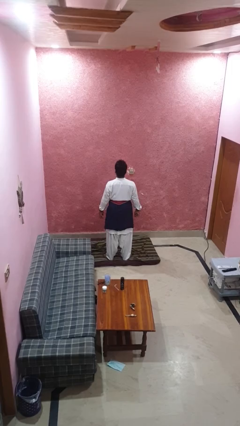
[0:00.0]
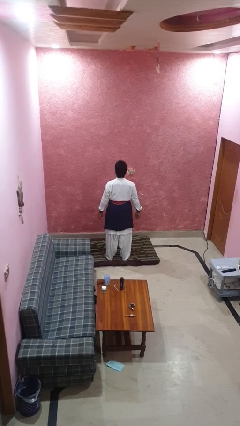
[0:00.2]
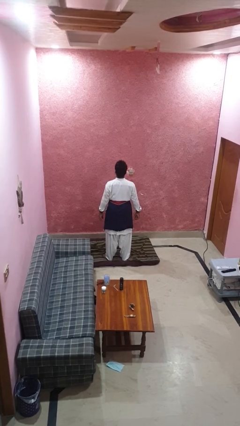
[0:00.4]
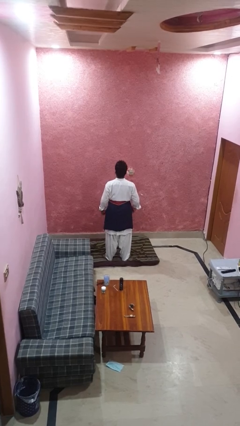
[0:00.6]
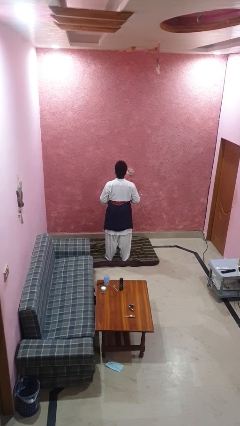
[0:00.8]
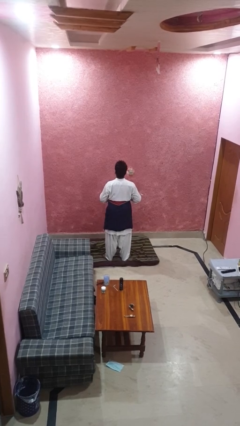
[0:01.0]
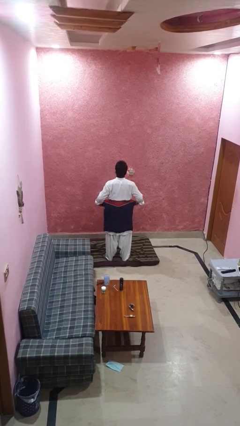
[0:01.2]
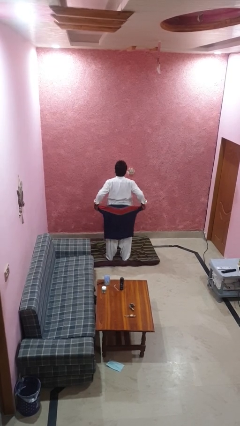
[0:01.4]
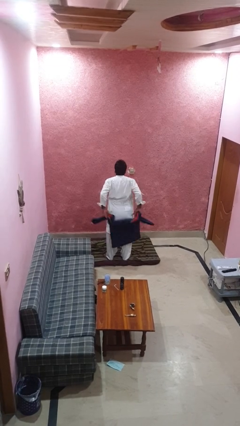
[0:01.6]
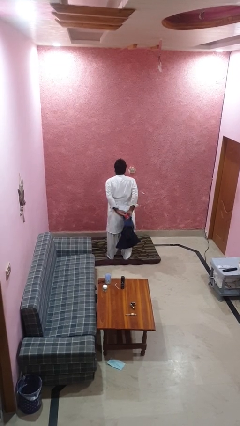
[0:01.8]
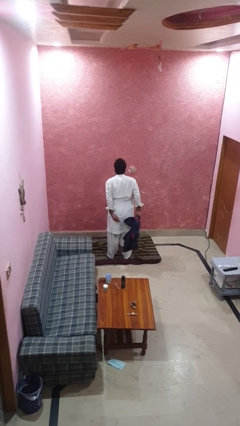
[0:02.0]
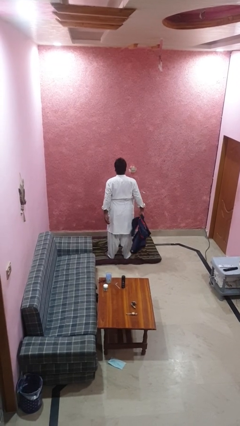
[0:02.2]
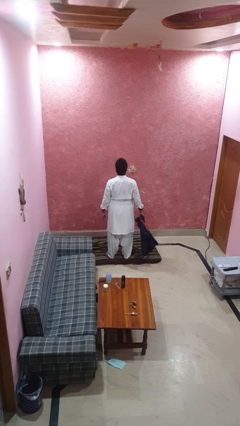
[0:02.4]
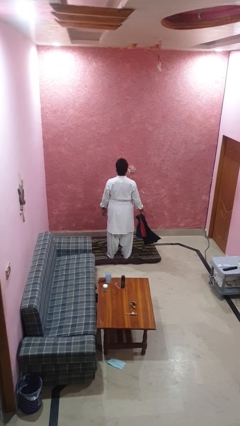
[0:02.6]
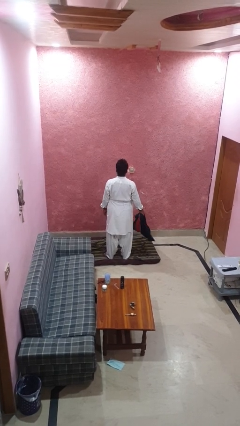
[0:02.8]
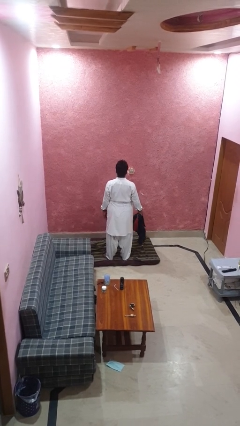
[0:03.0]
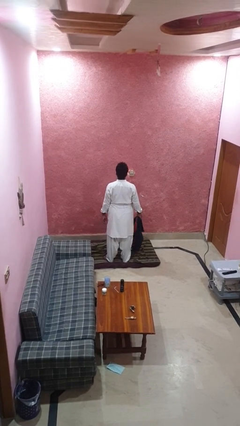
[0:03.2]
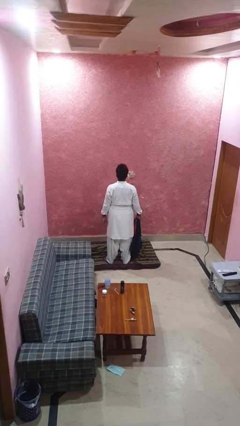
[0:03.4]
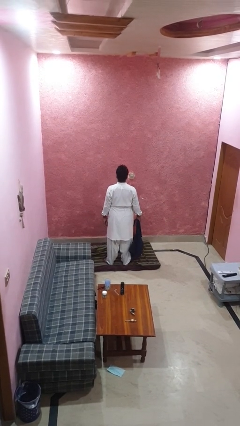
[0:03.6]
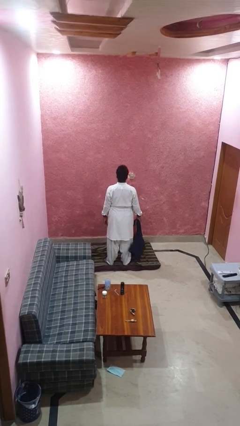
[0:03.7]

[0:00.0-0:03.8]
person unties jacket around waist

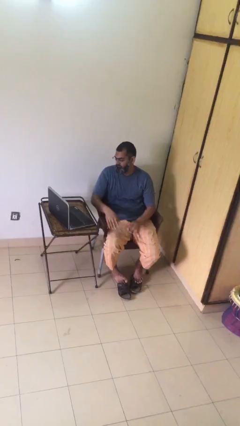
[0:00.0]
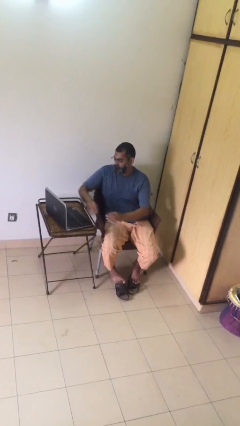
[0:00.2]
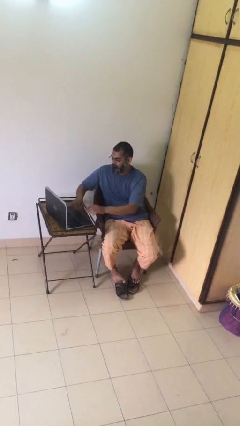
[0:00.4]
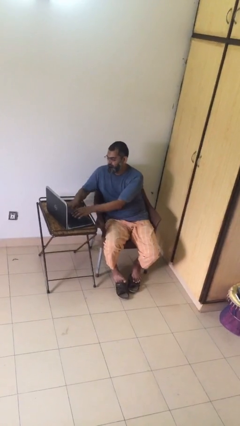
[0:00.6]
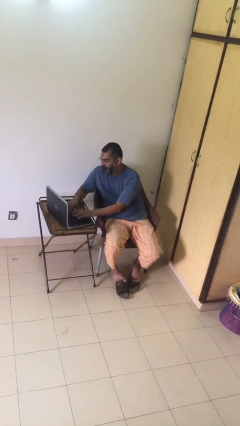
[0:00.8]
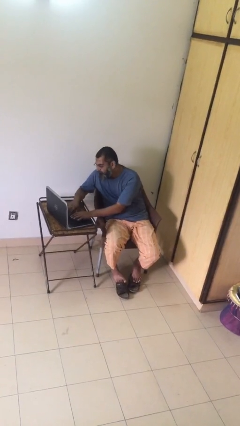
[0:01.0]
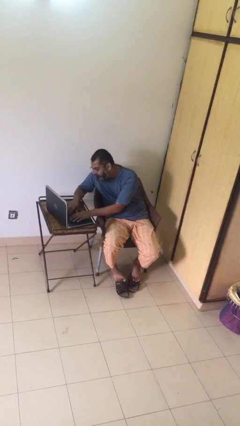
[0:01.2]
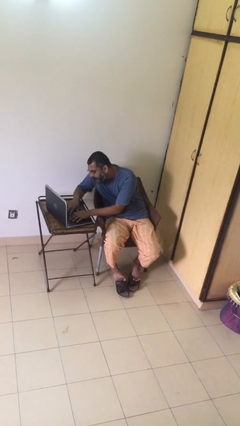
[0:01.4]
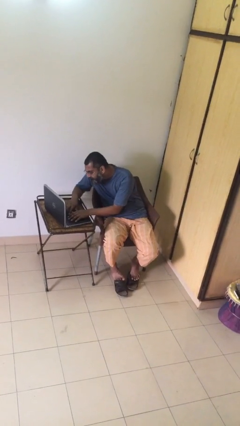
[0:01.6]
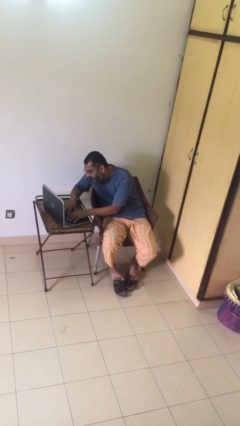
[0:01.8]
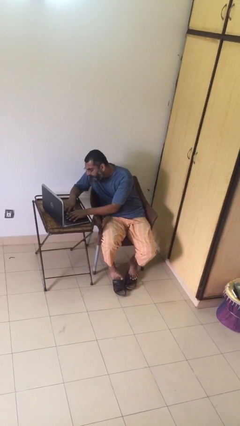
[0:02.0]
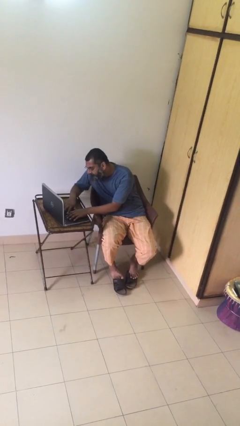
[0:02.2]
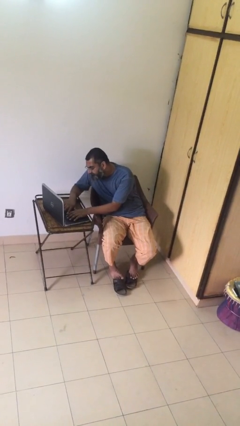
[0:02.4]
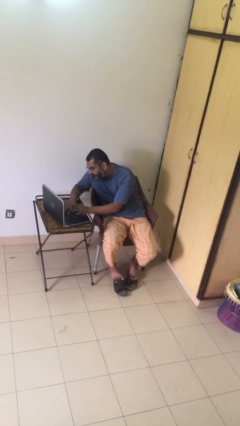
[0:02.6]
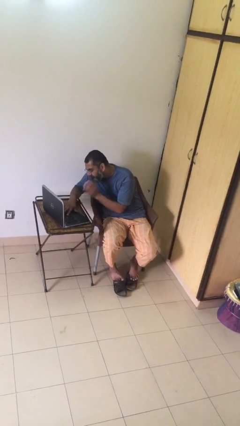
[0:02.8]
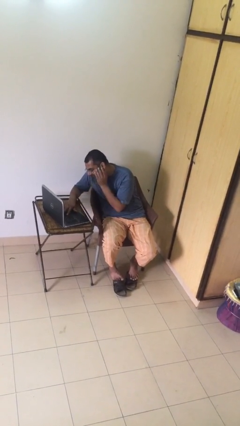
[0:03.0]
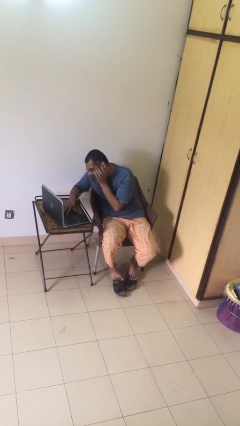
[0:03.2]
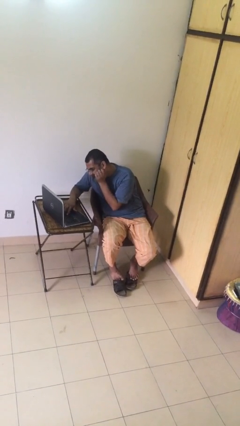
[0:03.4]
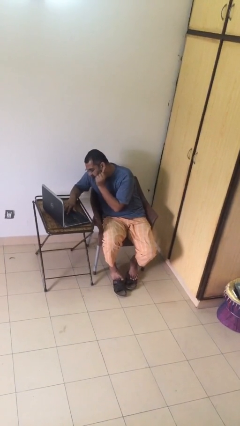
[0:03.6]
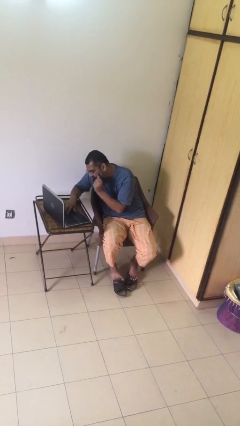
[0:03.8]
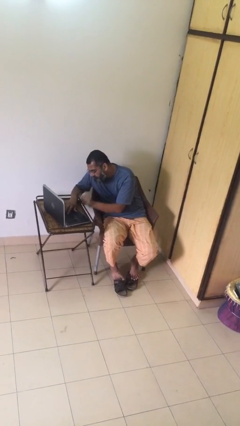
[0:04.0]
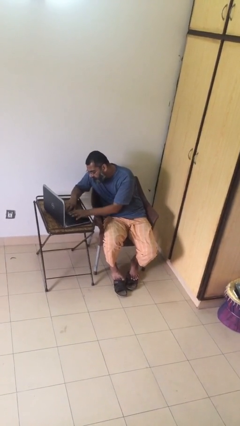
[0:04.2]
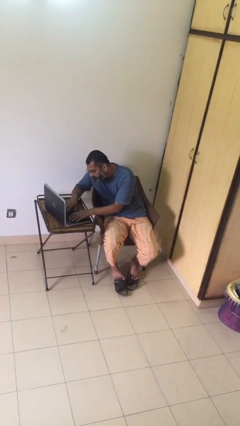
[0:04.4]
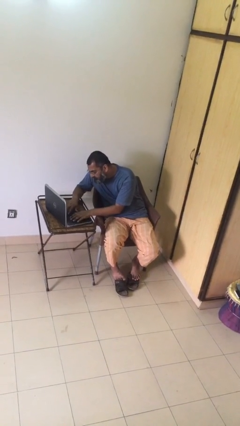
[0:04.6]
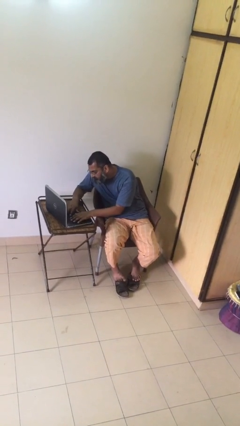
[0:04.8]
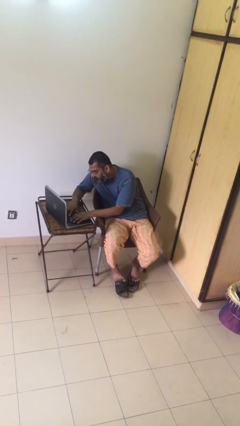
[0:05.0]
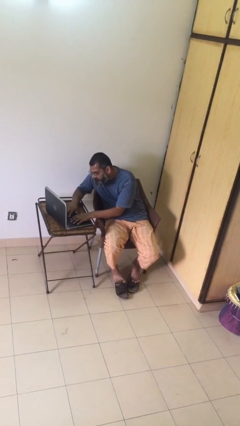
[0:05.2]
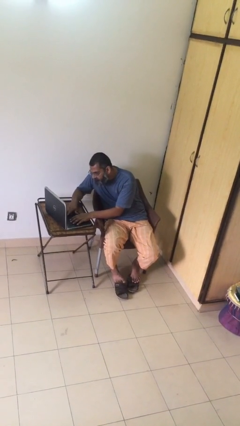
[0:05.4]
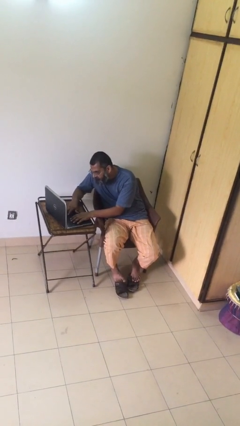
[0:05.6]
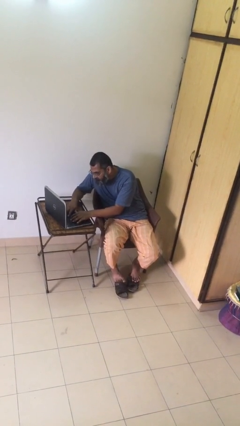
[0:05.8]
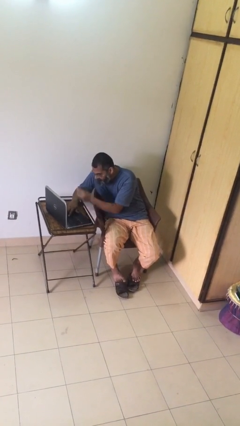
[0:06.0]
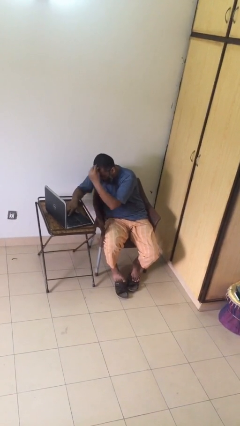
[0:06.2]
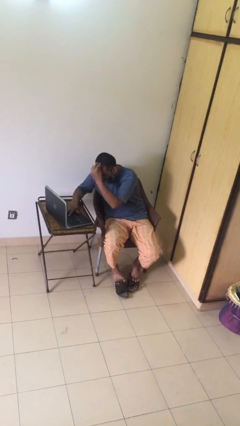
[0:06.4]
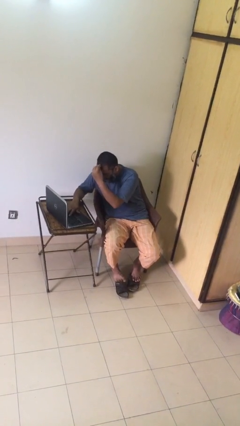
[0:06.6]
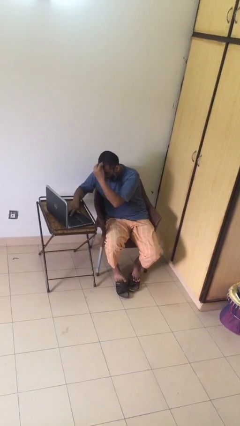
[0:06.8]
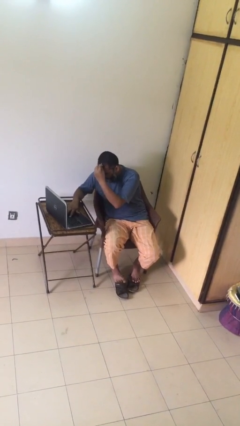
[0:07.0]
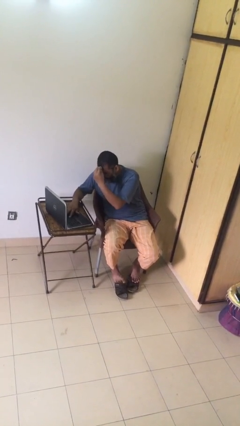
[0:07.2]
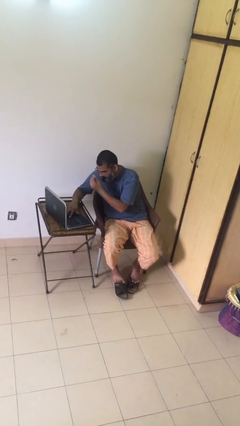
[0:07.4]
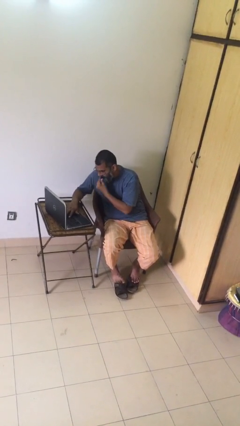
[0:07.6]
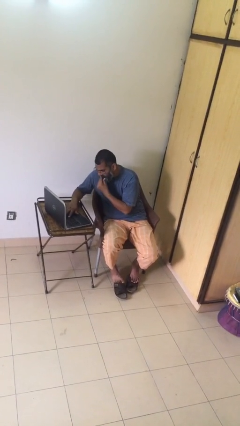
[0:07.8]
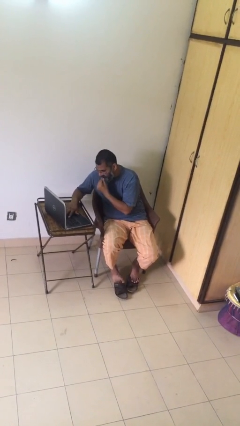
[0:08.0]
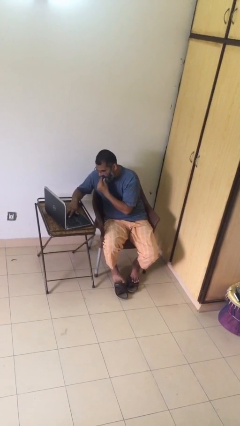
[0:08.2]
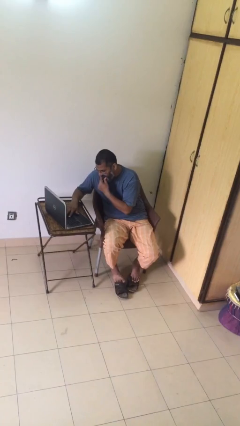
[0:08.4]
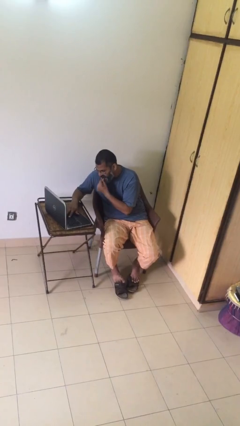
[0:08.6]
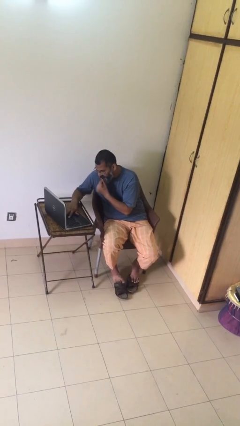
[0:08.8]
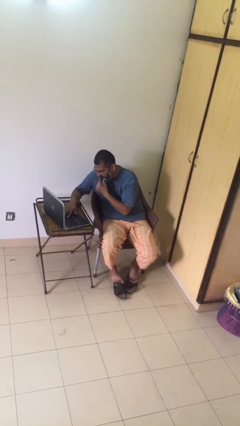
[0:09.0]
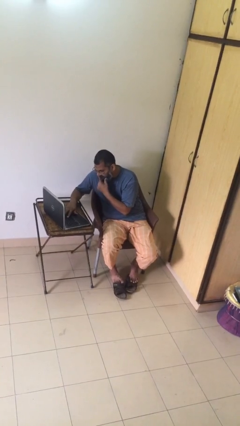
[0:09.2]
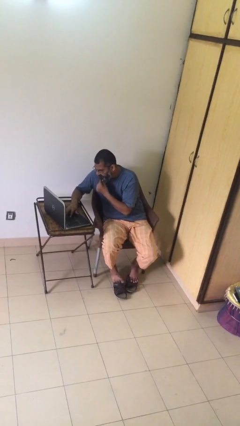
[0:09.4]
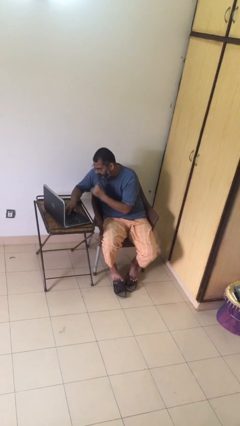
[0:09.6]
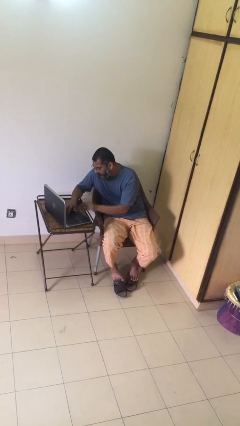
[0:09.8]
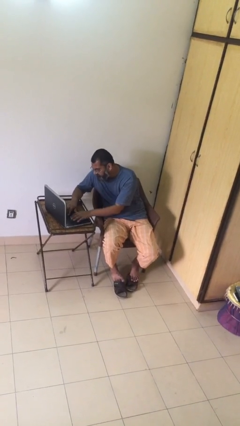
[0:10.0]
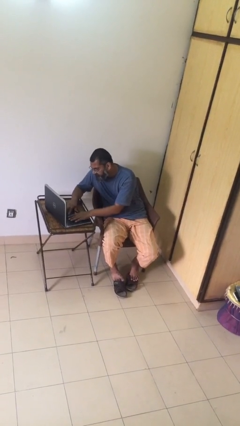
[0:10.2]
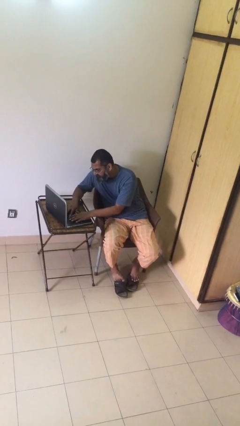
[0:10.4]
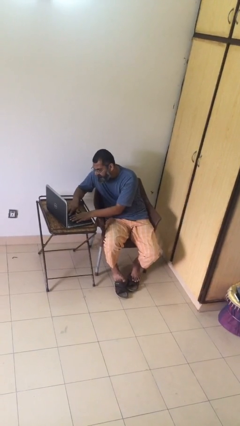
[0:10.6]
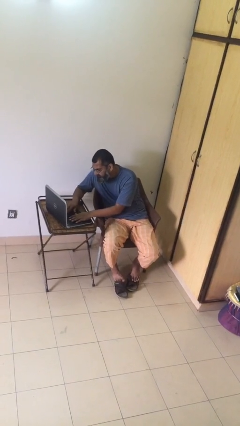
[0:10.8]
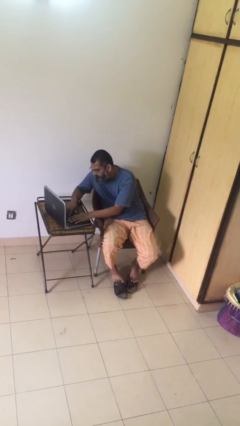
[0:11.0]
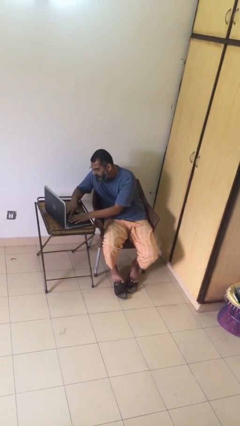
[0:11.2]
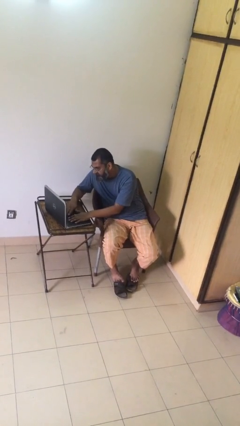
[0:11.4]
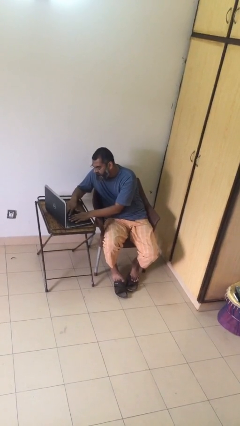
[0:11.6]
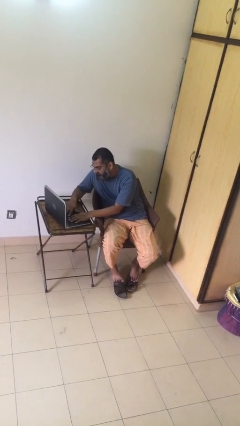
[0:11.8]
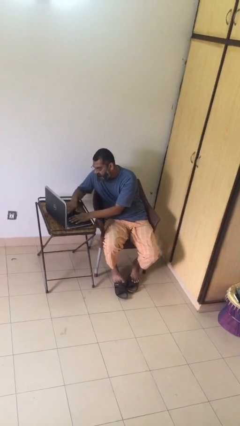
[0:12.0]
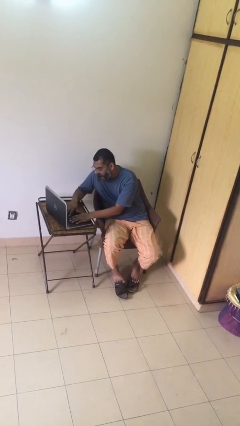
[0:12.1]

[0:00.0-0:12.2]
person interacts with laptop

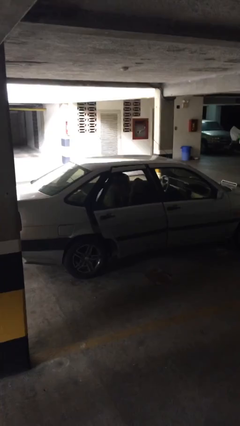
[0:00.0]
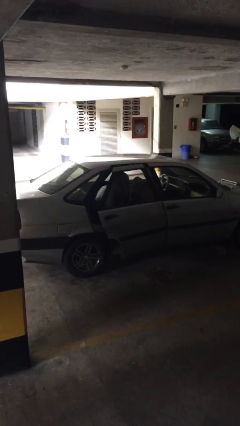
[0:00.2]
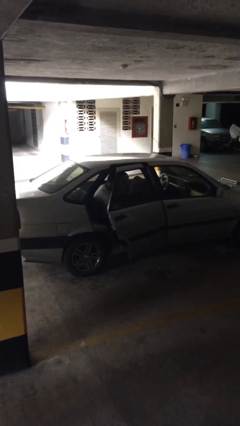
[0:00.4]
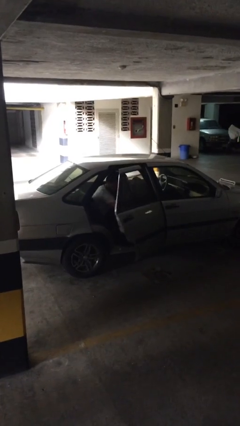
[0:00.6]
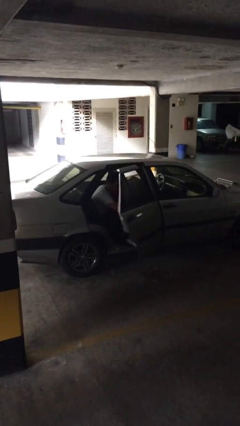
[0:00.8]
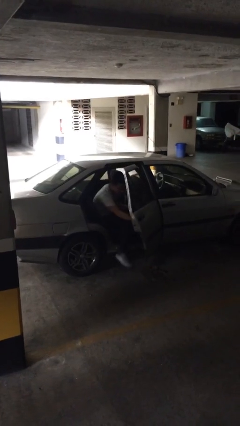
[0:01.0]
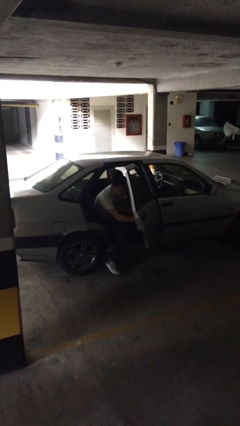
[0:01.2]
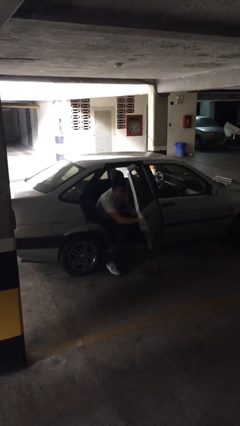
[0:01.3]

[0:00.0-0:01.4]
person opens car door

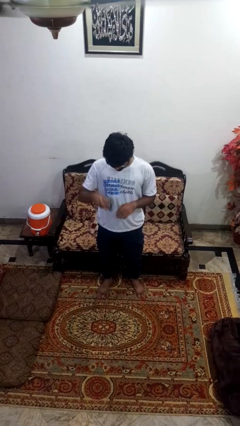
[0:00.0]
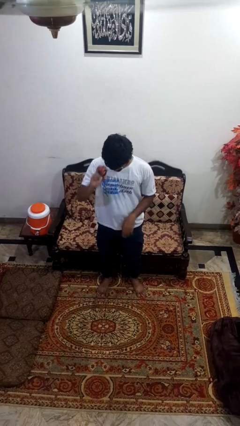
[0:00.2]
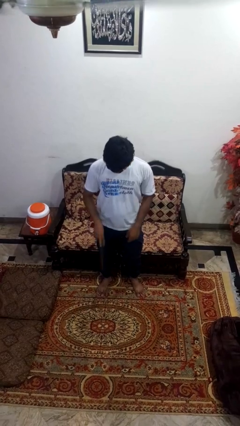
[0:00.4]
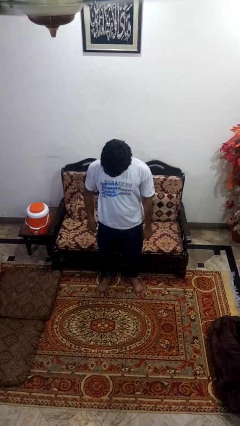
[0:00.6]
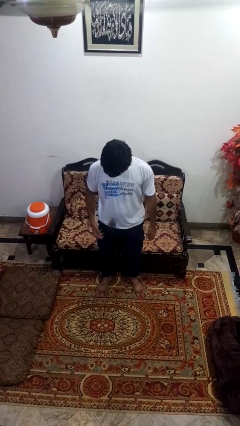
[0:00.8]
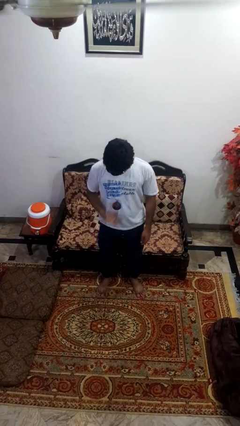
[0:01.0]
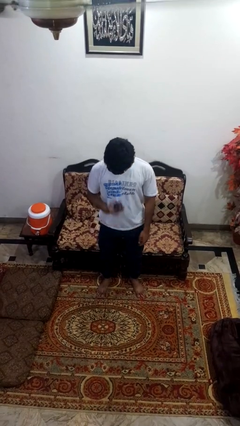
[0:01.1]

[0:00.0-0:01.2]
person bounces ball on floor
